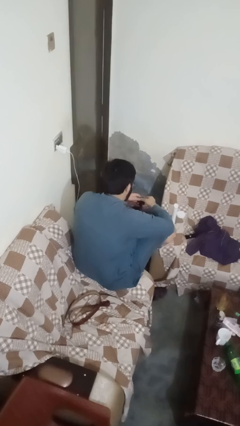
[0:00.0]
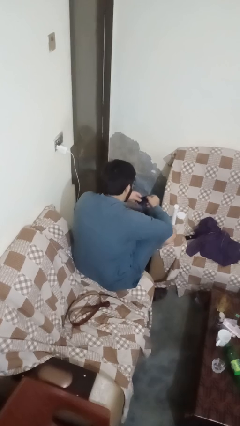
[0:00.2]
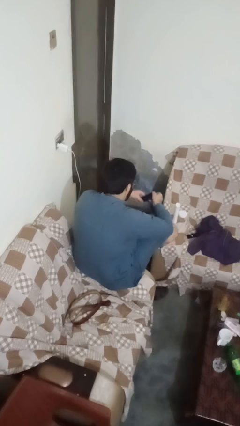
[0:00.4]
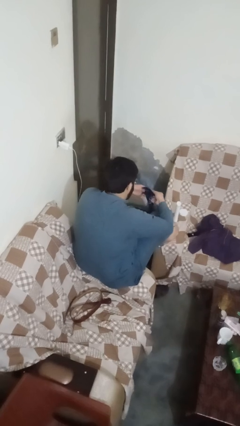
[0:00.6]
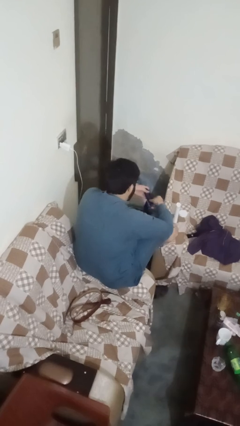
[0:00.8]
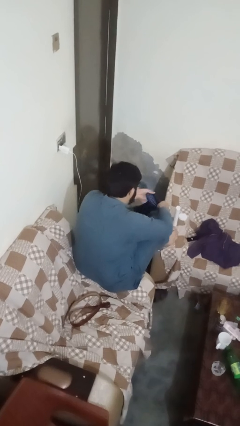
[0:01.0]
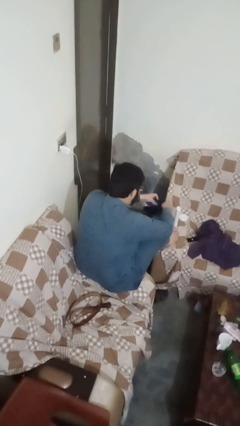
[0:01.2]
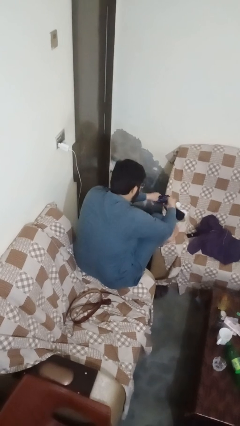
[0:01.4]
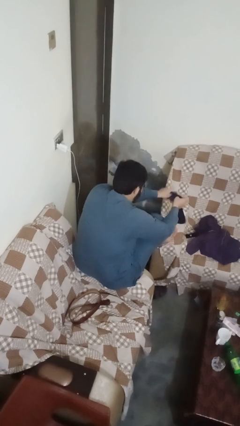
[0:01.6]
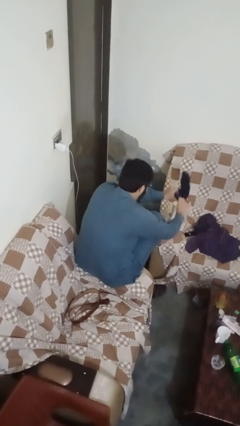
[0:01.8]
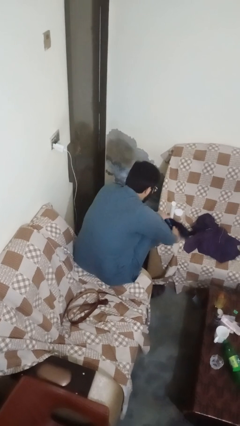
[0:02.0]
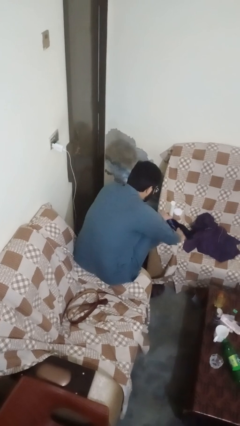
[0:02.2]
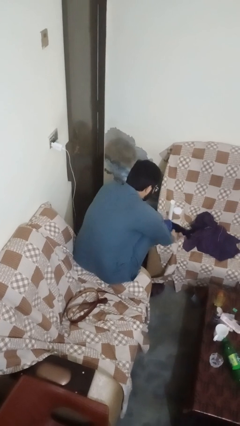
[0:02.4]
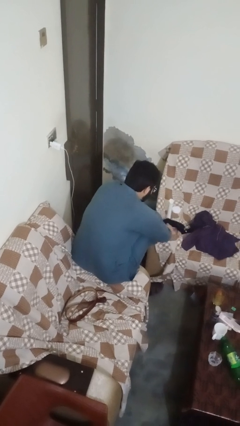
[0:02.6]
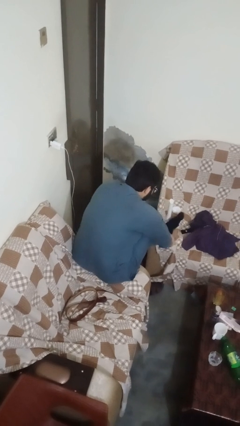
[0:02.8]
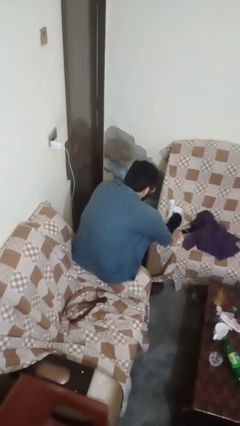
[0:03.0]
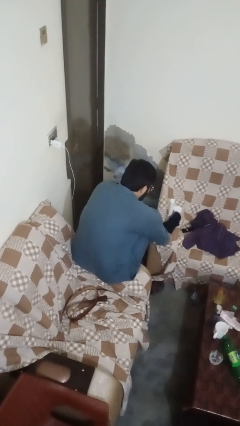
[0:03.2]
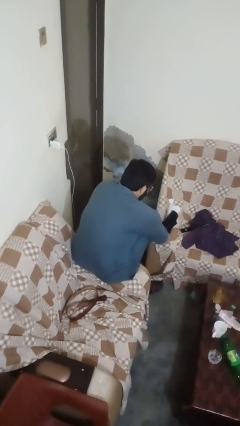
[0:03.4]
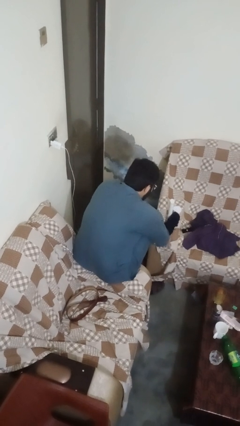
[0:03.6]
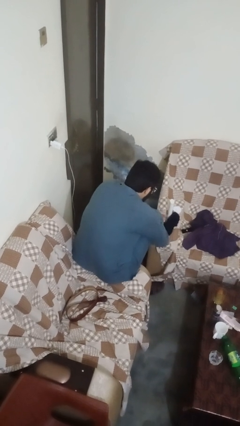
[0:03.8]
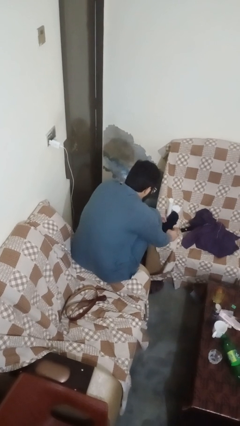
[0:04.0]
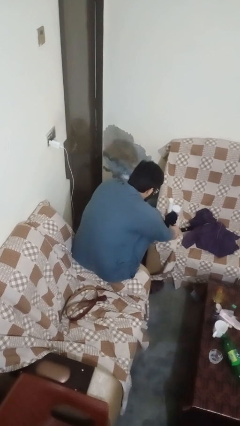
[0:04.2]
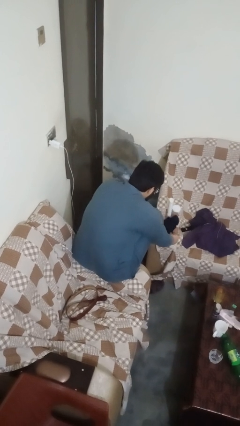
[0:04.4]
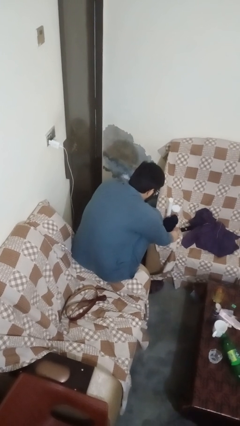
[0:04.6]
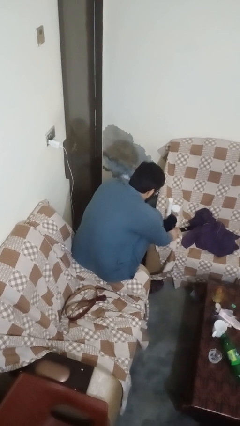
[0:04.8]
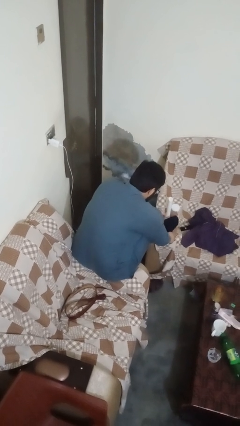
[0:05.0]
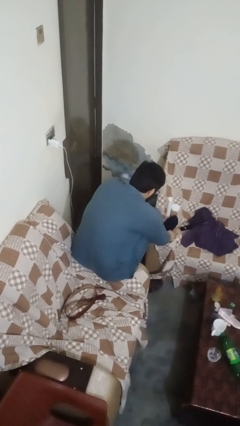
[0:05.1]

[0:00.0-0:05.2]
person puts on socks

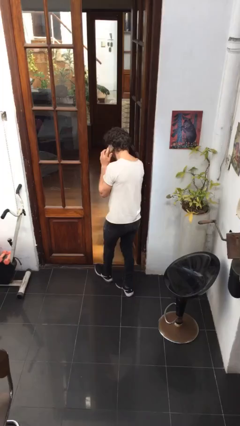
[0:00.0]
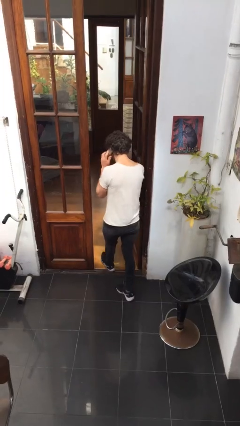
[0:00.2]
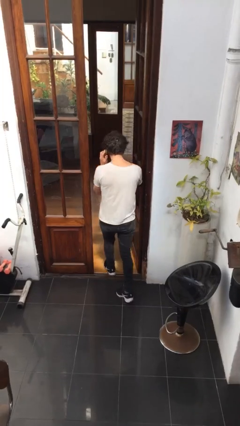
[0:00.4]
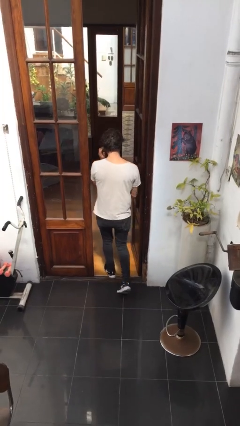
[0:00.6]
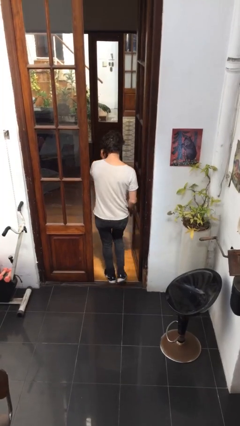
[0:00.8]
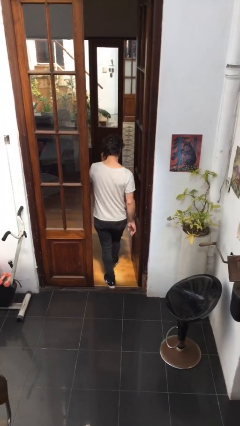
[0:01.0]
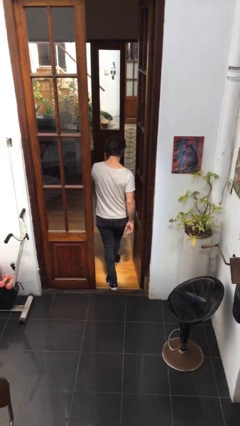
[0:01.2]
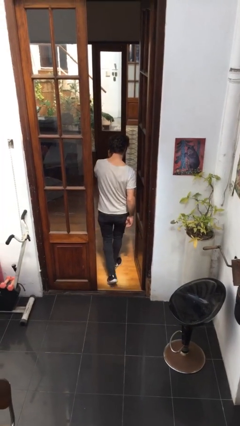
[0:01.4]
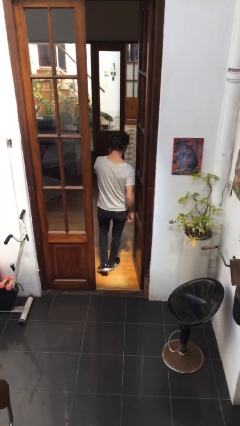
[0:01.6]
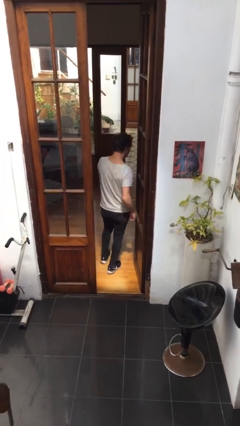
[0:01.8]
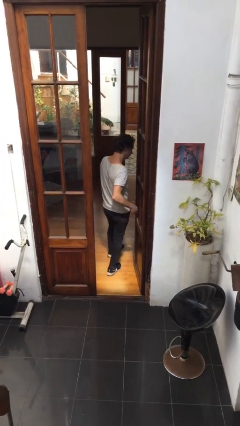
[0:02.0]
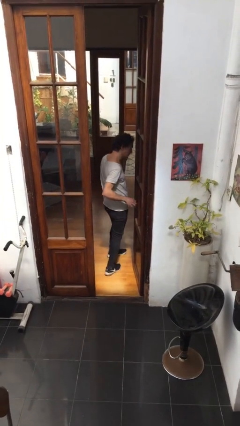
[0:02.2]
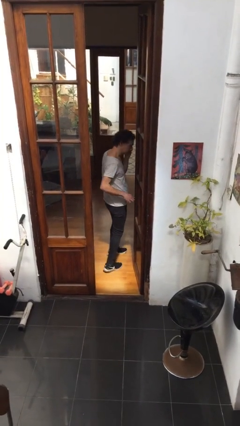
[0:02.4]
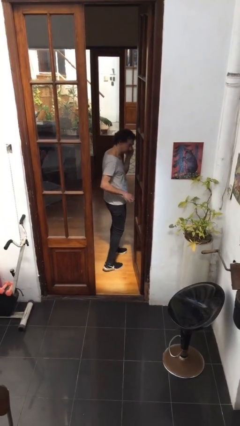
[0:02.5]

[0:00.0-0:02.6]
person exits scene through structure

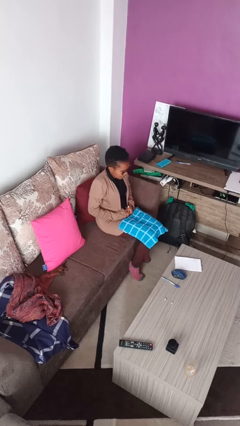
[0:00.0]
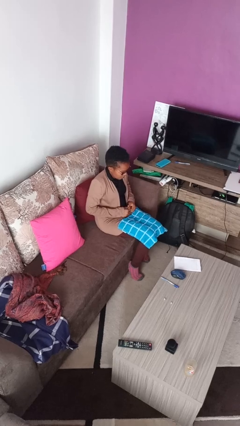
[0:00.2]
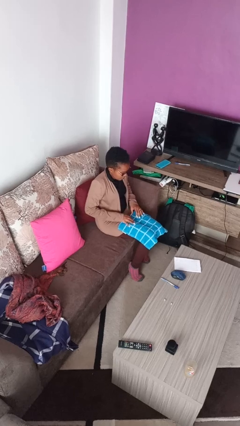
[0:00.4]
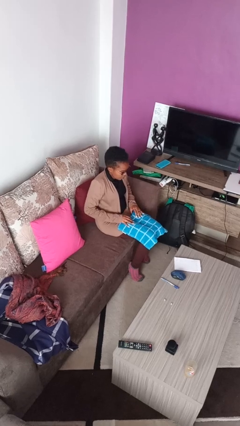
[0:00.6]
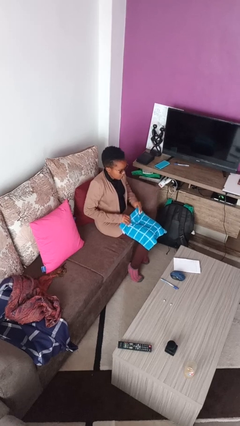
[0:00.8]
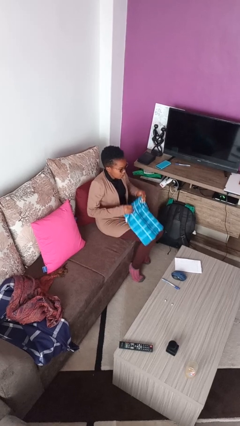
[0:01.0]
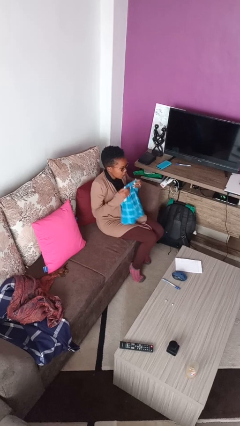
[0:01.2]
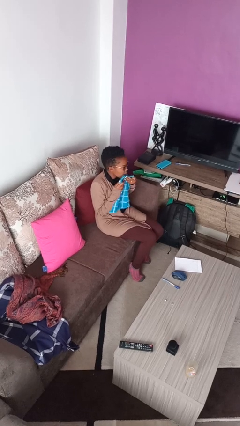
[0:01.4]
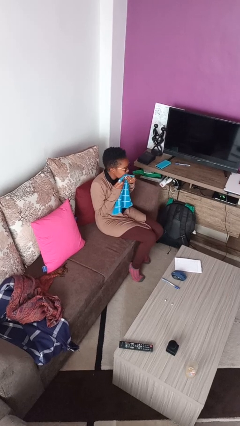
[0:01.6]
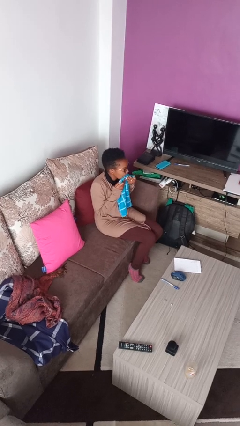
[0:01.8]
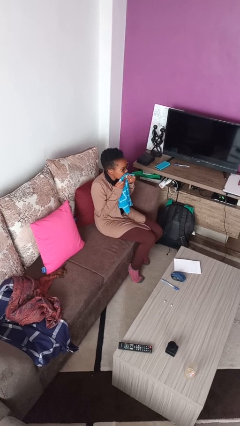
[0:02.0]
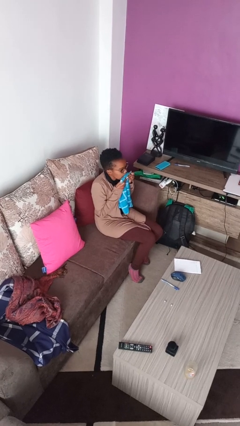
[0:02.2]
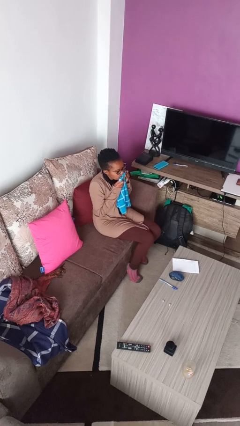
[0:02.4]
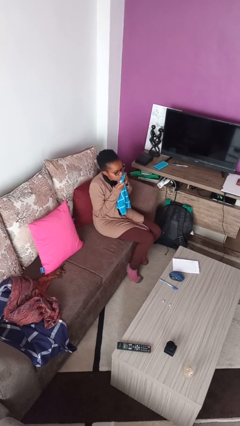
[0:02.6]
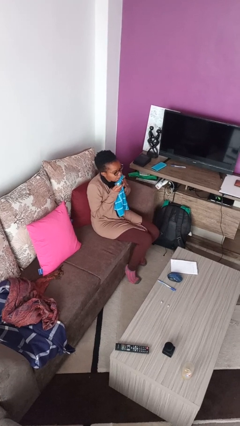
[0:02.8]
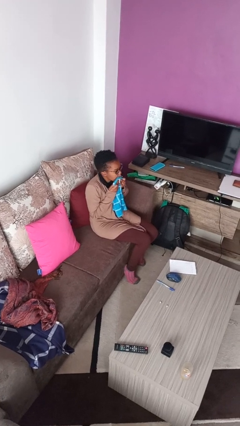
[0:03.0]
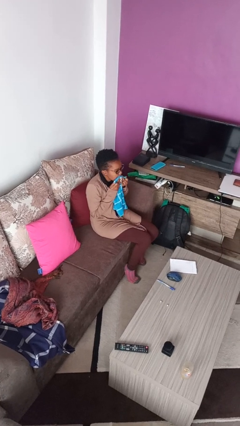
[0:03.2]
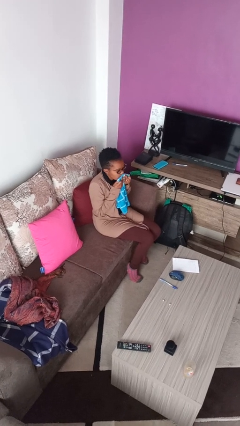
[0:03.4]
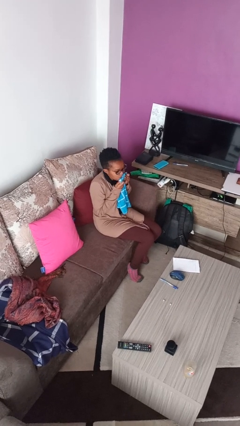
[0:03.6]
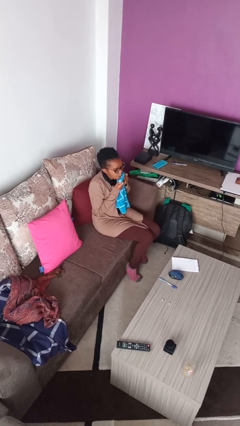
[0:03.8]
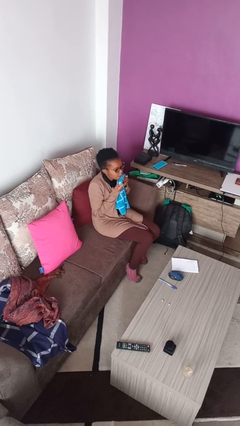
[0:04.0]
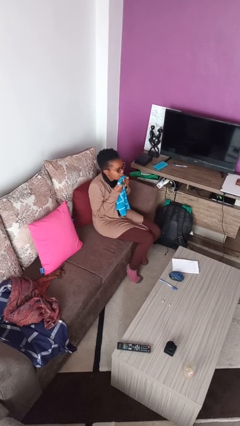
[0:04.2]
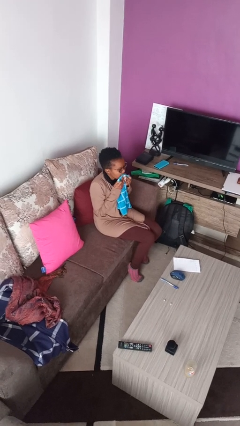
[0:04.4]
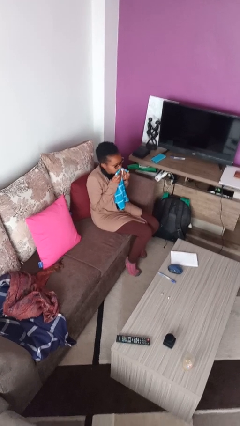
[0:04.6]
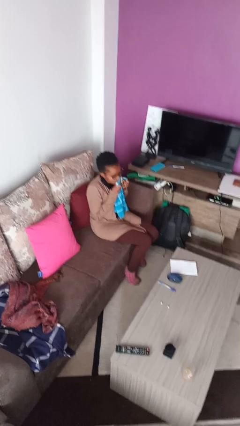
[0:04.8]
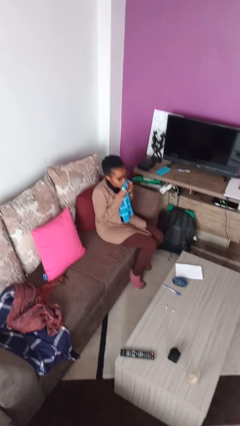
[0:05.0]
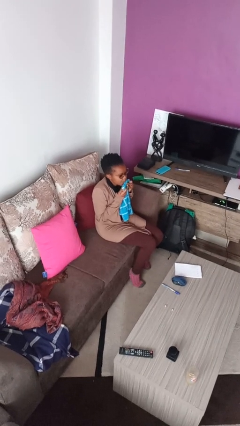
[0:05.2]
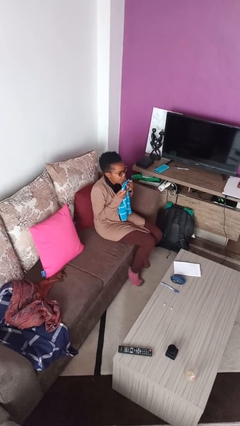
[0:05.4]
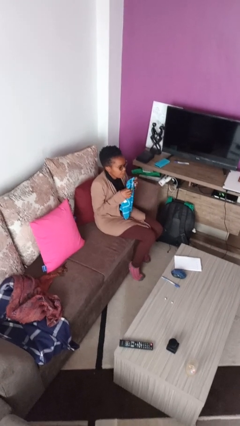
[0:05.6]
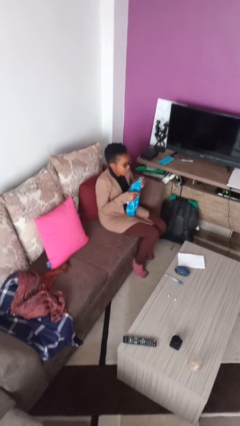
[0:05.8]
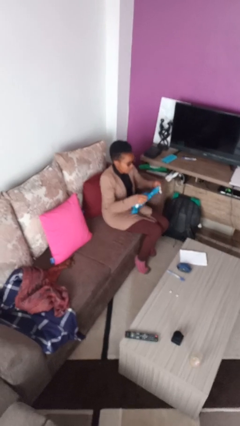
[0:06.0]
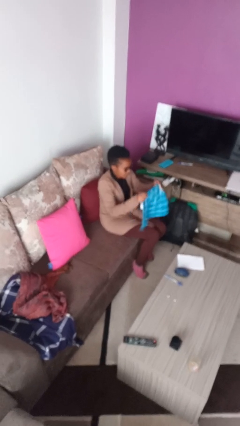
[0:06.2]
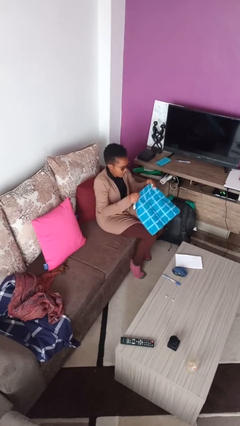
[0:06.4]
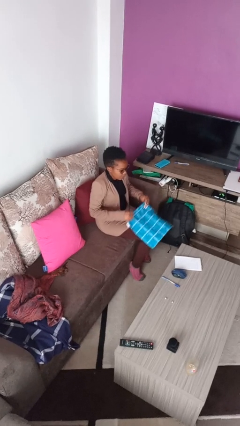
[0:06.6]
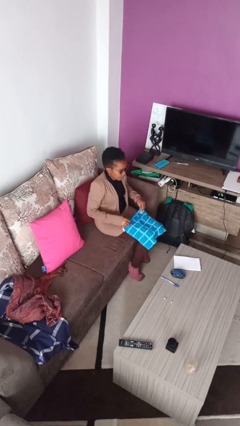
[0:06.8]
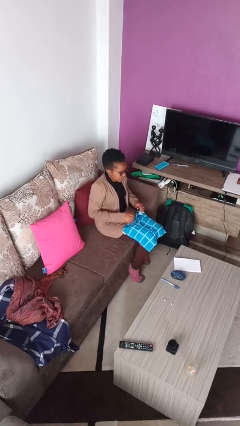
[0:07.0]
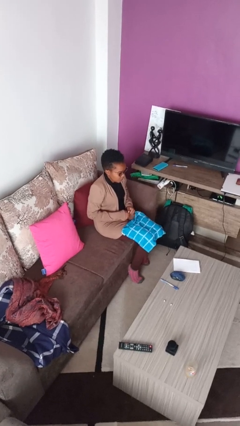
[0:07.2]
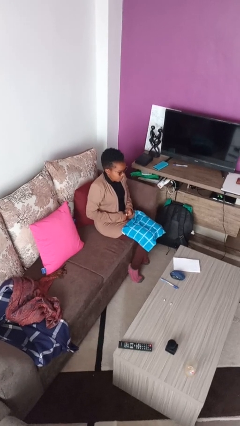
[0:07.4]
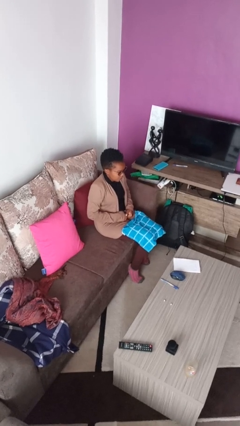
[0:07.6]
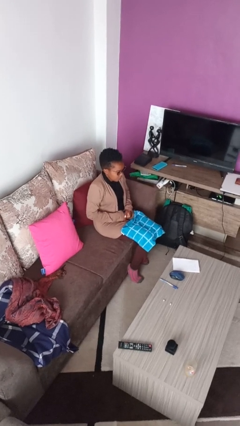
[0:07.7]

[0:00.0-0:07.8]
person wipes mouth with napkin

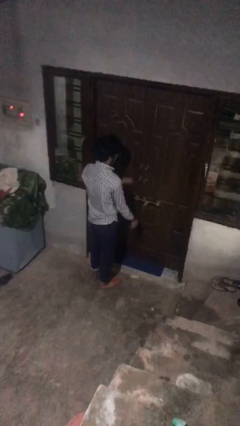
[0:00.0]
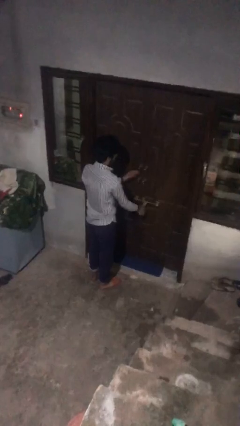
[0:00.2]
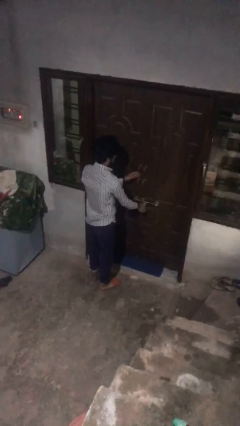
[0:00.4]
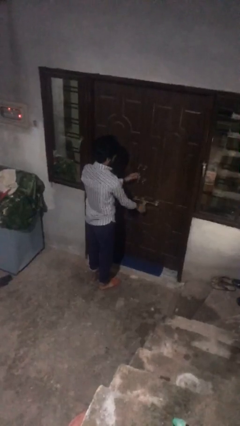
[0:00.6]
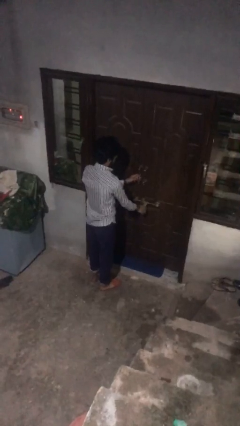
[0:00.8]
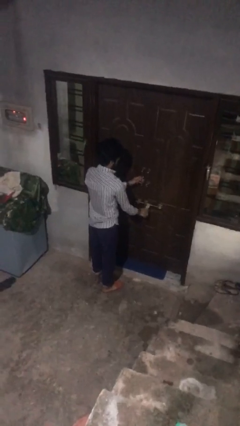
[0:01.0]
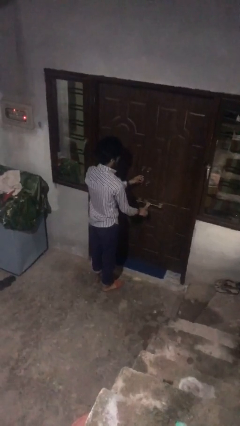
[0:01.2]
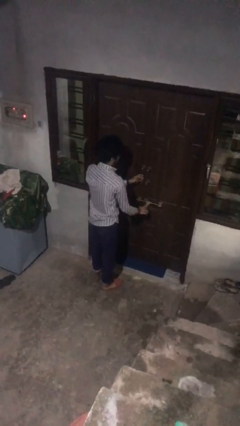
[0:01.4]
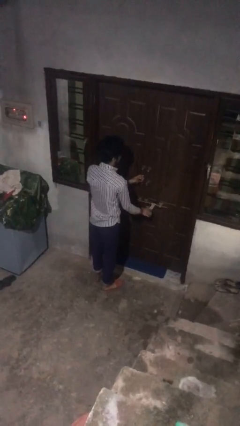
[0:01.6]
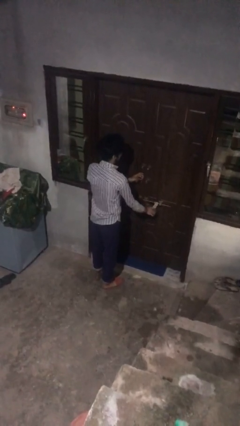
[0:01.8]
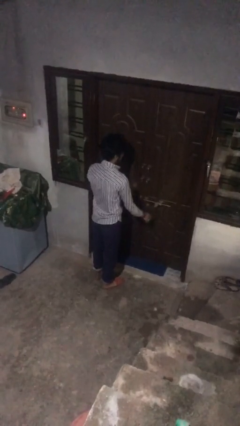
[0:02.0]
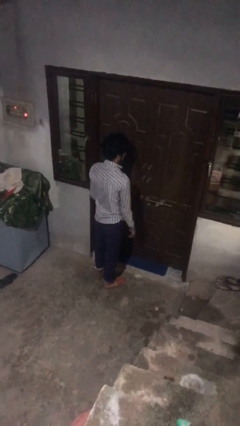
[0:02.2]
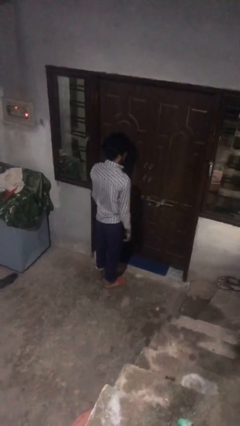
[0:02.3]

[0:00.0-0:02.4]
person unlocks door with keys
